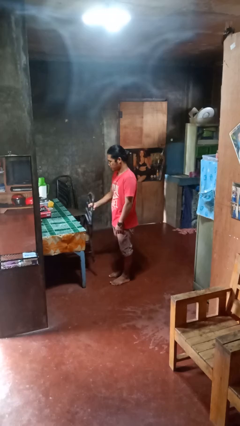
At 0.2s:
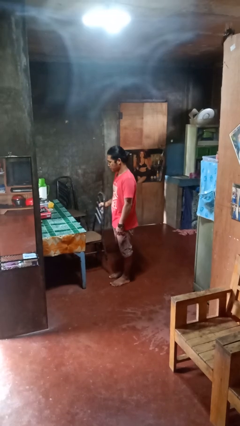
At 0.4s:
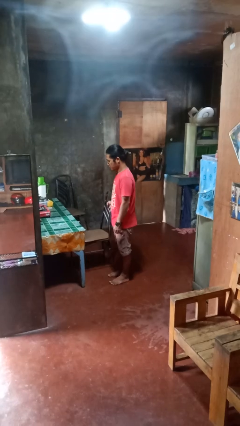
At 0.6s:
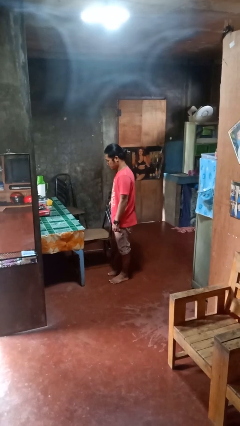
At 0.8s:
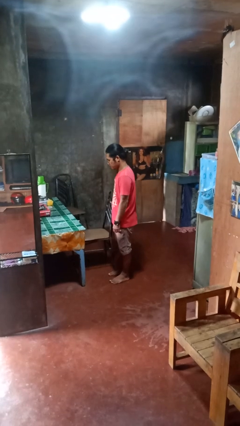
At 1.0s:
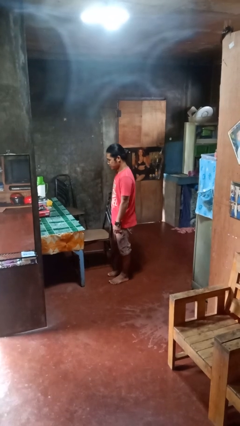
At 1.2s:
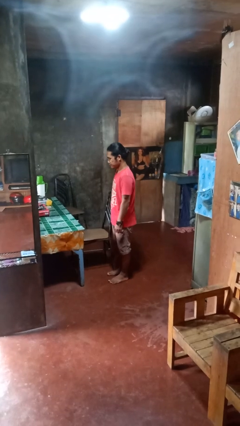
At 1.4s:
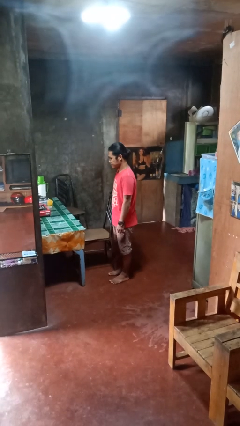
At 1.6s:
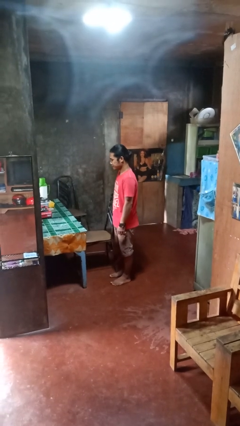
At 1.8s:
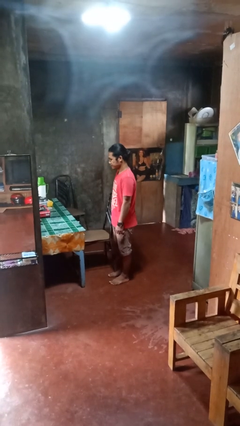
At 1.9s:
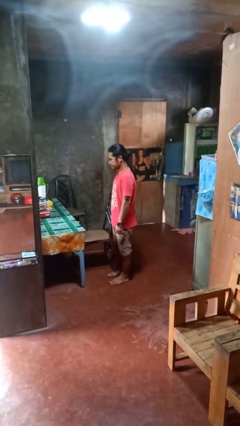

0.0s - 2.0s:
person pulls out chair

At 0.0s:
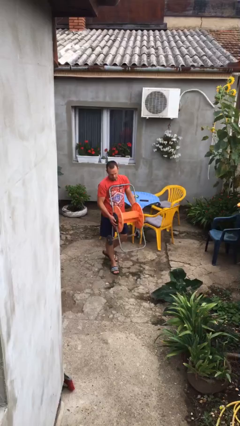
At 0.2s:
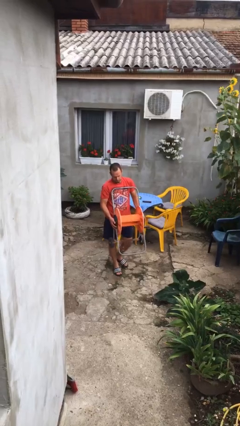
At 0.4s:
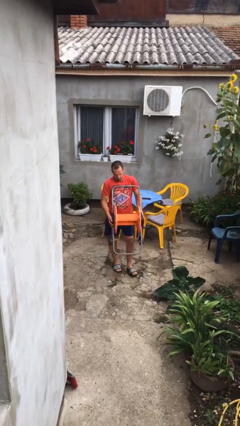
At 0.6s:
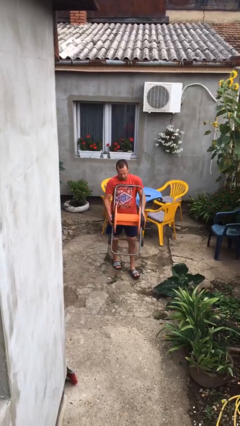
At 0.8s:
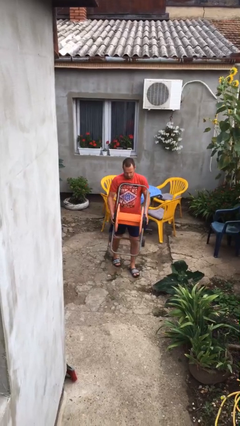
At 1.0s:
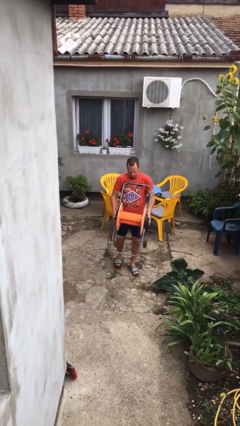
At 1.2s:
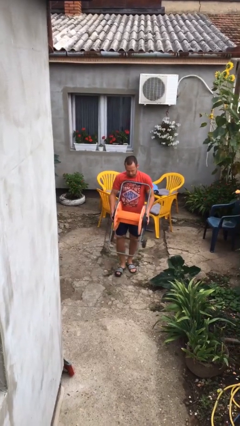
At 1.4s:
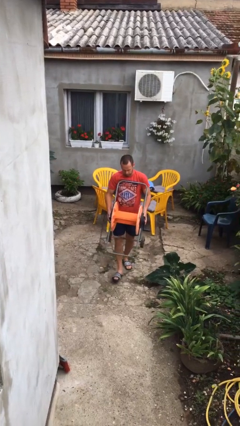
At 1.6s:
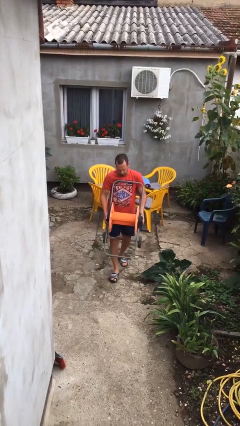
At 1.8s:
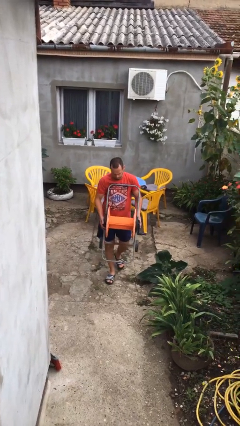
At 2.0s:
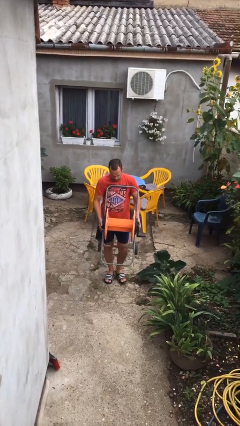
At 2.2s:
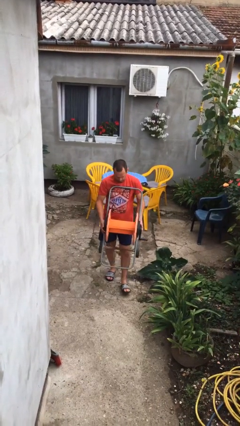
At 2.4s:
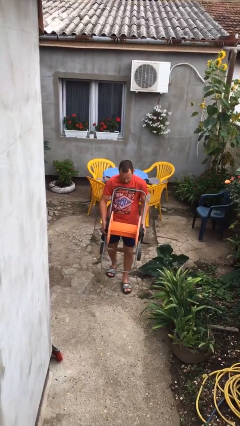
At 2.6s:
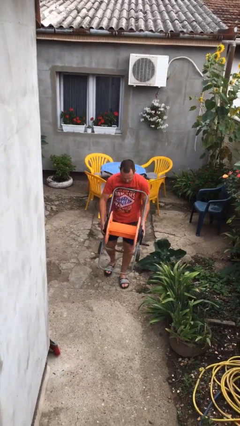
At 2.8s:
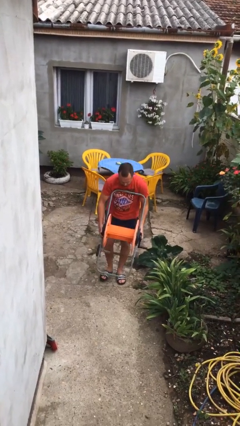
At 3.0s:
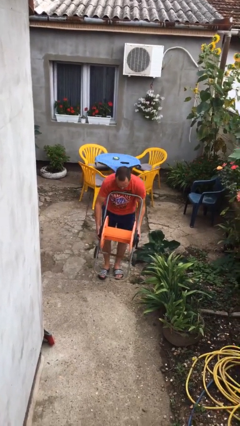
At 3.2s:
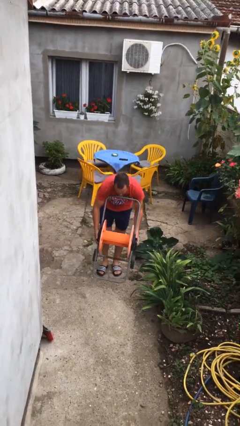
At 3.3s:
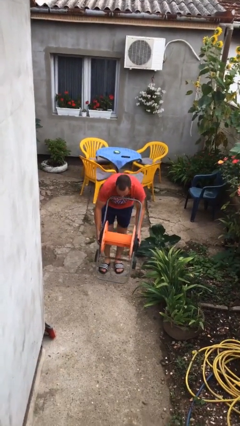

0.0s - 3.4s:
person carries heavy object

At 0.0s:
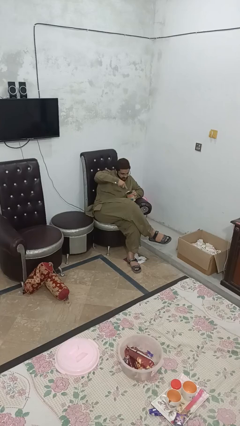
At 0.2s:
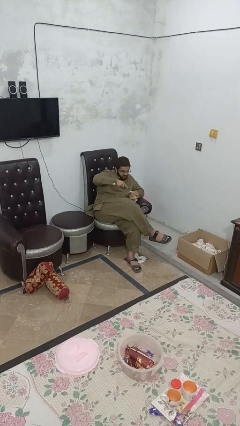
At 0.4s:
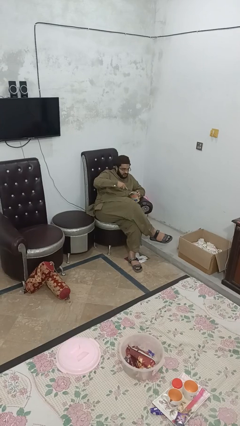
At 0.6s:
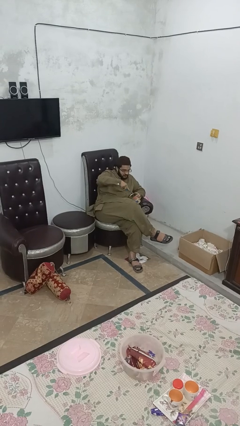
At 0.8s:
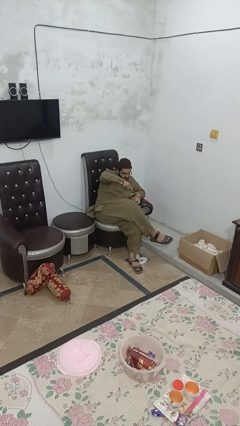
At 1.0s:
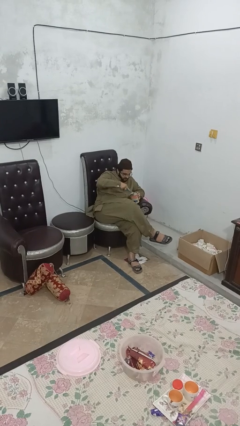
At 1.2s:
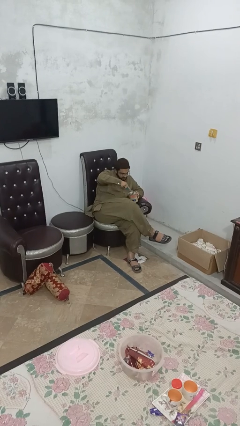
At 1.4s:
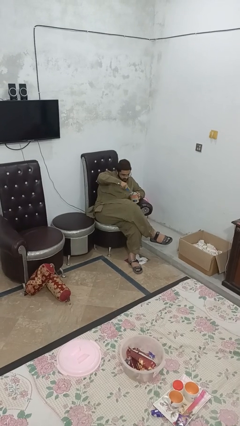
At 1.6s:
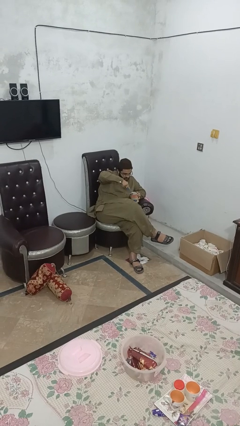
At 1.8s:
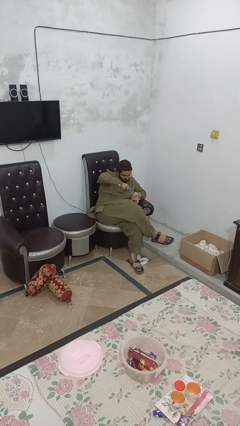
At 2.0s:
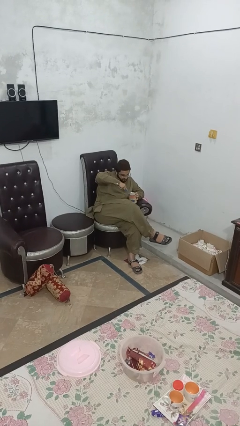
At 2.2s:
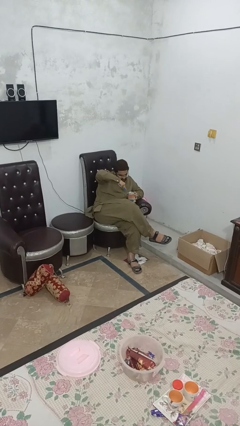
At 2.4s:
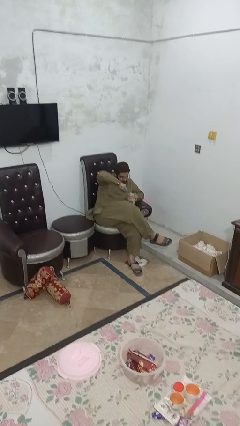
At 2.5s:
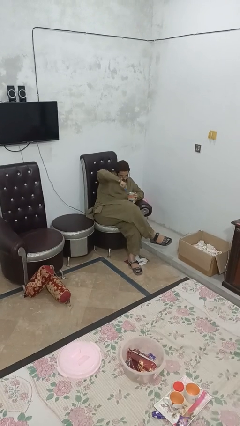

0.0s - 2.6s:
person opens can with can opener

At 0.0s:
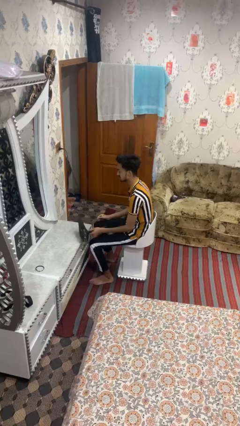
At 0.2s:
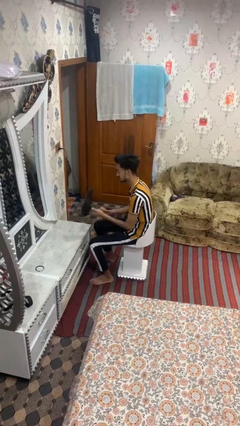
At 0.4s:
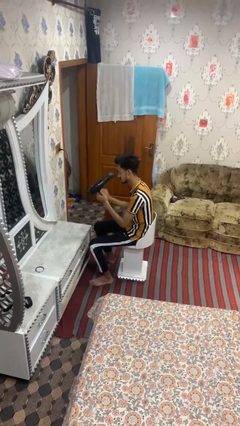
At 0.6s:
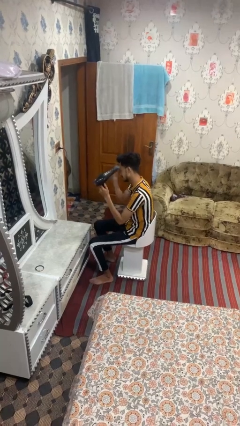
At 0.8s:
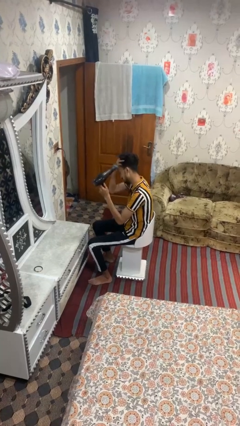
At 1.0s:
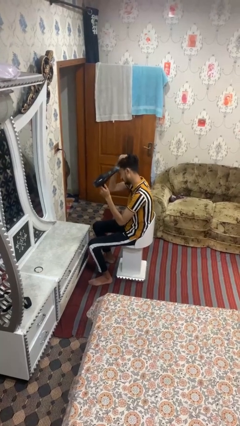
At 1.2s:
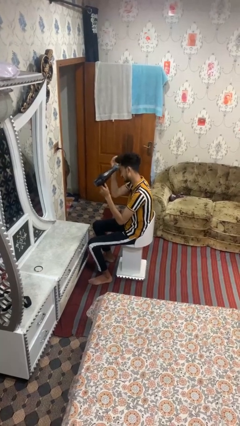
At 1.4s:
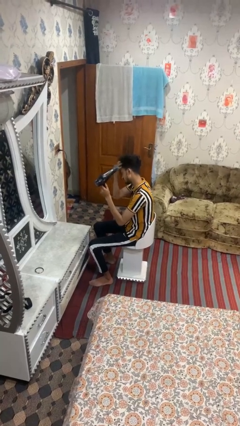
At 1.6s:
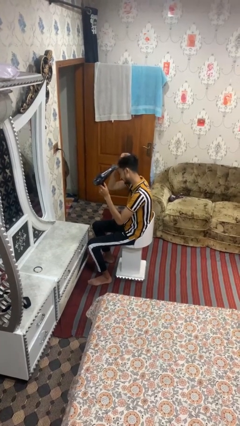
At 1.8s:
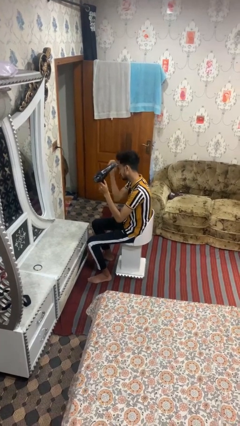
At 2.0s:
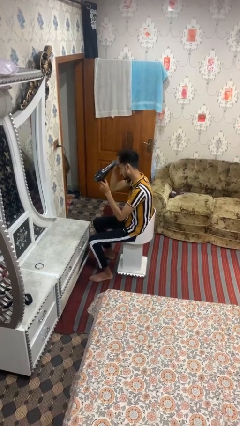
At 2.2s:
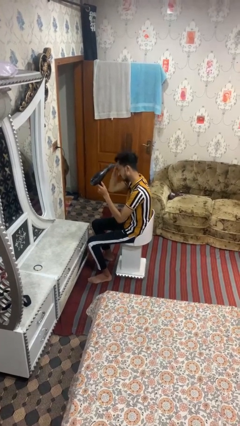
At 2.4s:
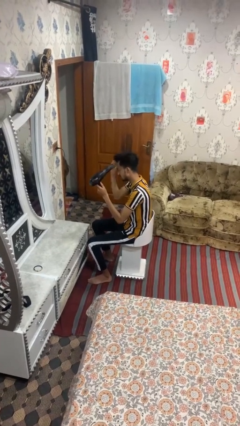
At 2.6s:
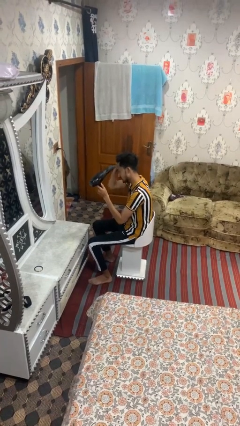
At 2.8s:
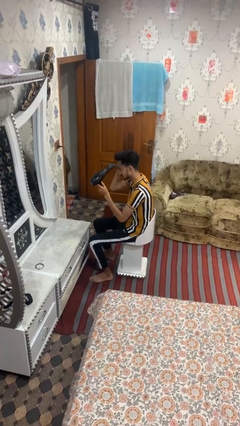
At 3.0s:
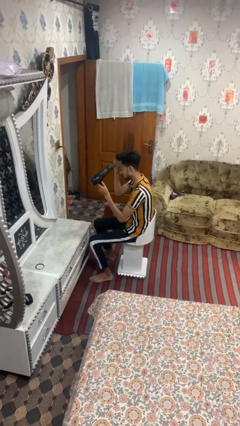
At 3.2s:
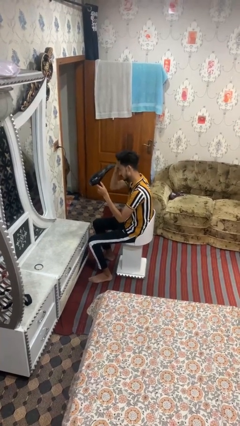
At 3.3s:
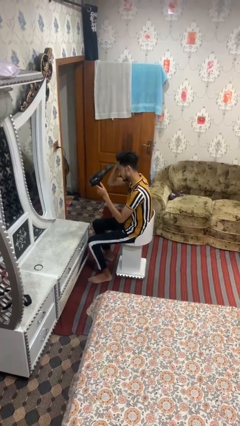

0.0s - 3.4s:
person dries hair with hairdryer

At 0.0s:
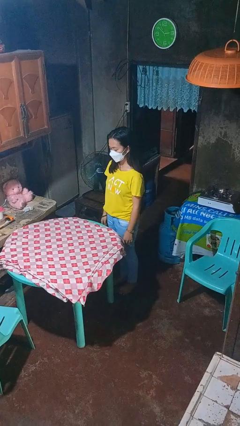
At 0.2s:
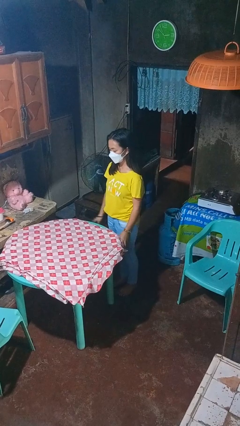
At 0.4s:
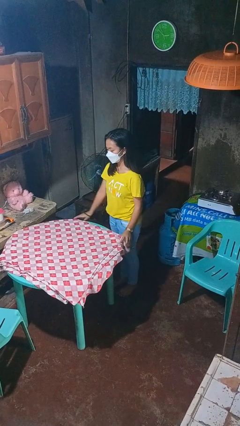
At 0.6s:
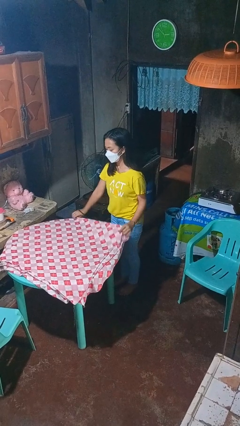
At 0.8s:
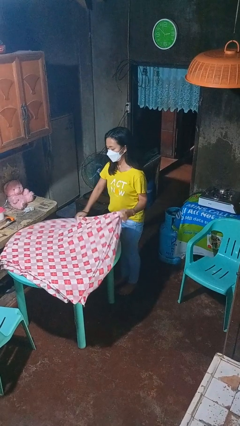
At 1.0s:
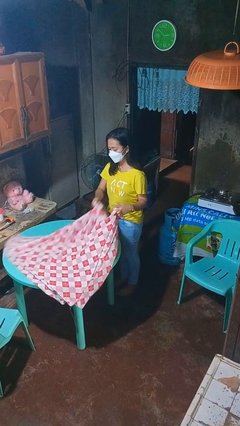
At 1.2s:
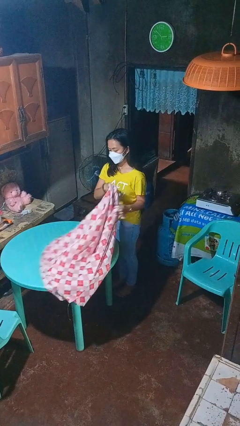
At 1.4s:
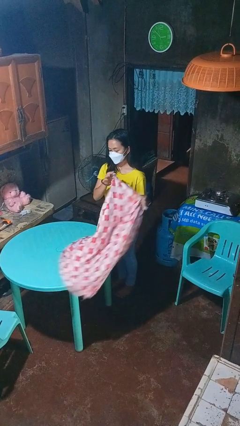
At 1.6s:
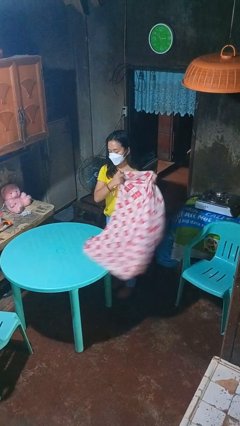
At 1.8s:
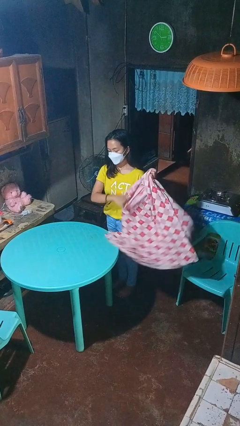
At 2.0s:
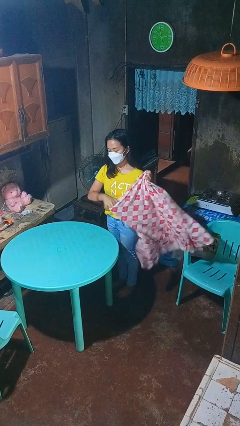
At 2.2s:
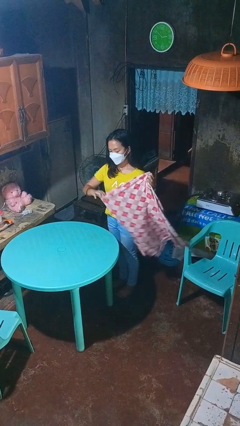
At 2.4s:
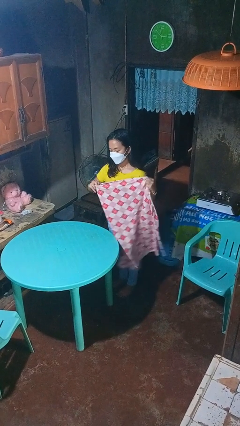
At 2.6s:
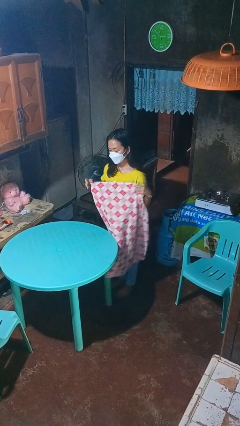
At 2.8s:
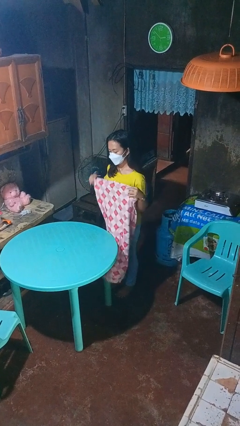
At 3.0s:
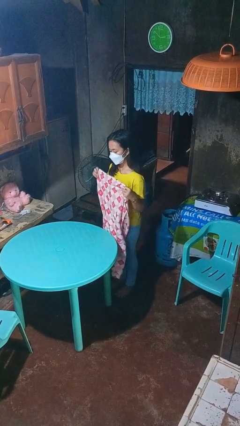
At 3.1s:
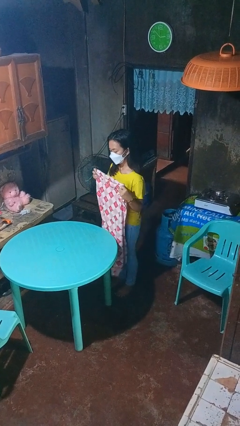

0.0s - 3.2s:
person folds tablecloth

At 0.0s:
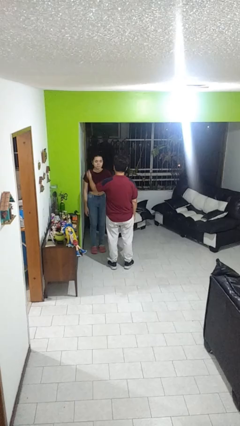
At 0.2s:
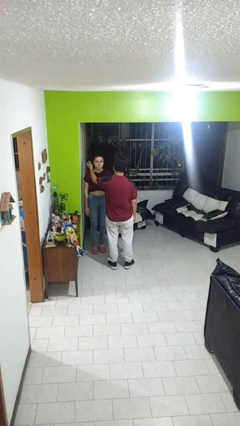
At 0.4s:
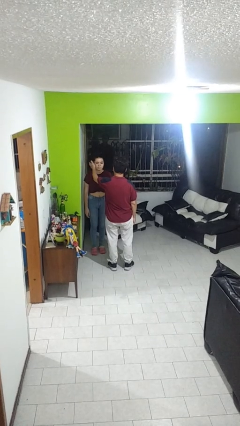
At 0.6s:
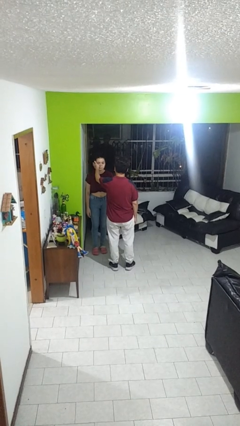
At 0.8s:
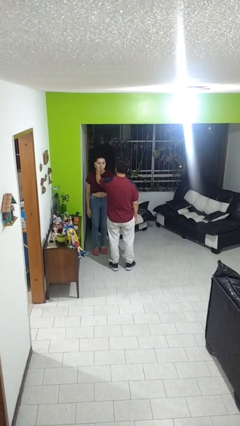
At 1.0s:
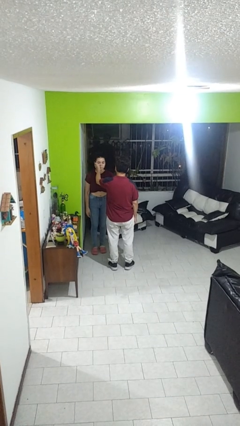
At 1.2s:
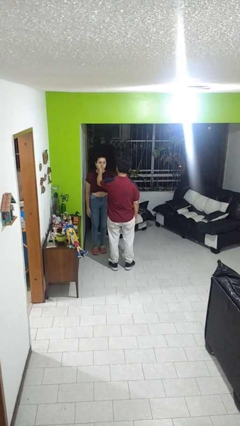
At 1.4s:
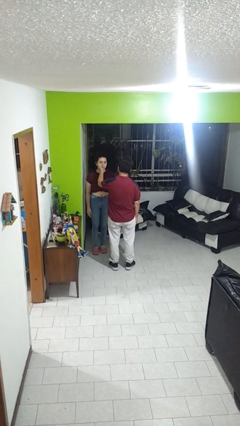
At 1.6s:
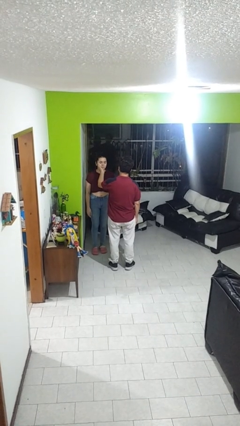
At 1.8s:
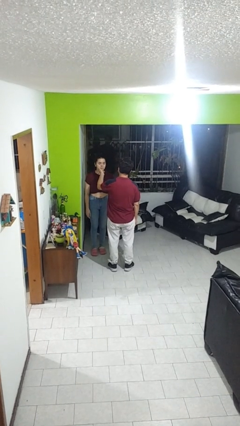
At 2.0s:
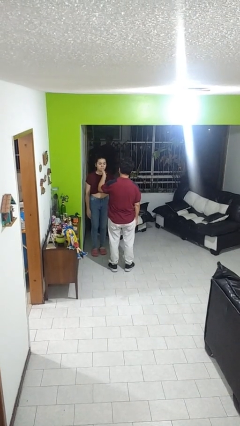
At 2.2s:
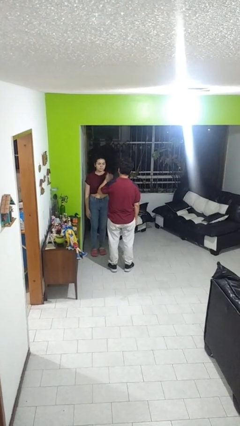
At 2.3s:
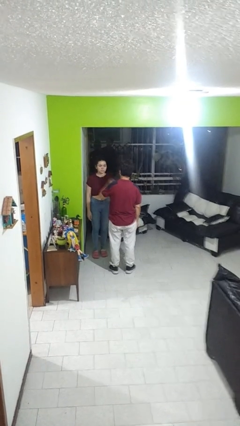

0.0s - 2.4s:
person touches face of person

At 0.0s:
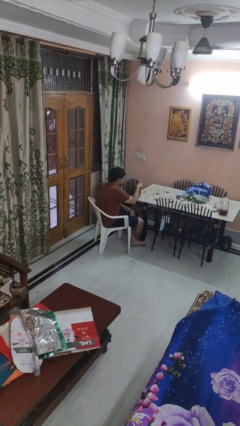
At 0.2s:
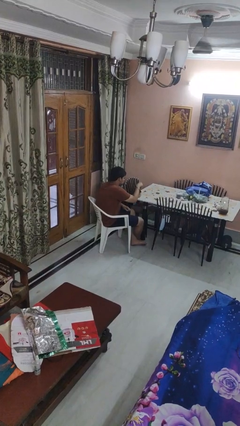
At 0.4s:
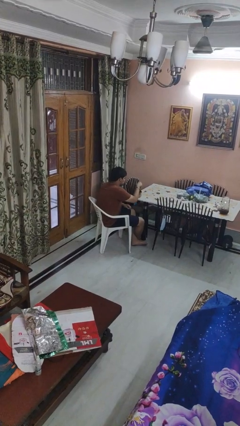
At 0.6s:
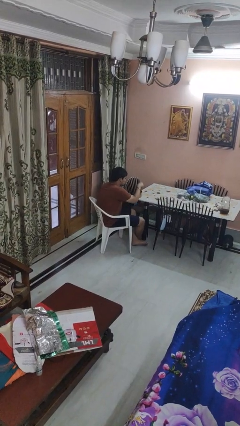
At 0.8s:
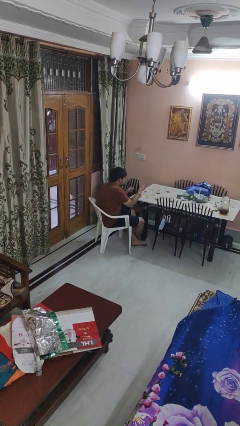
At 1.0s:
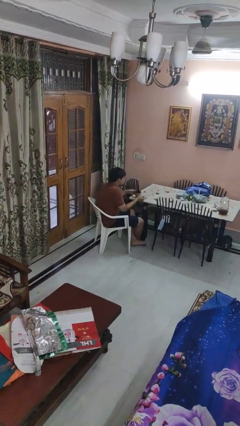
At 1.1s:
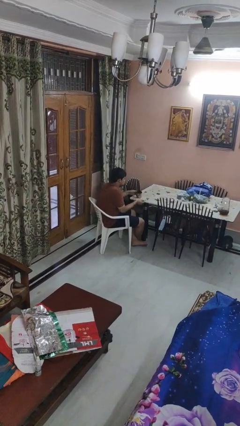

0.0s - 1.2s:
person stirs mug
